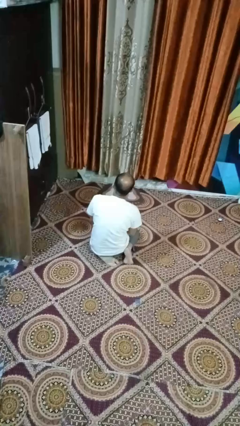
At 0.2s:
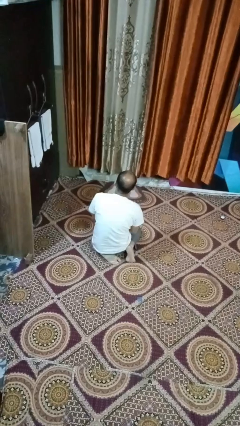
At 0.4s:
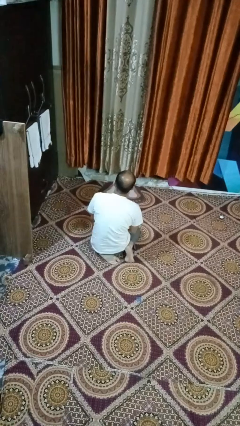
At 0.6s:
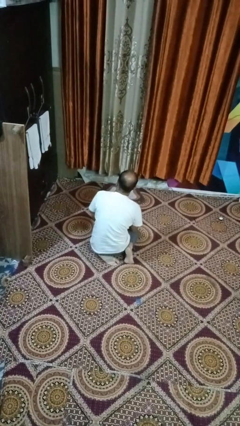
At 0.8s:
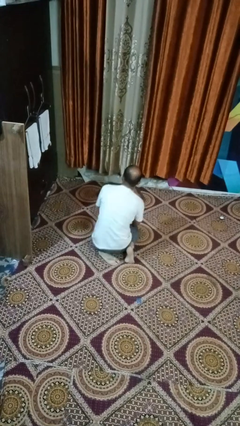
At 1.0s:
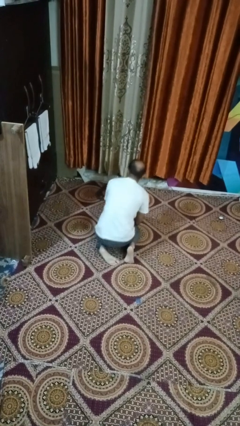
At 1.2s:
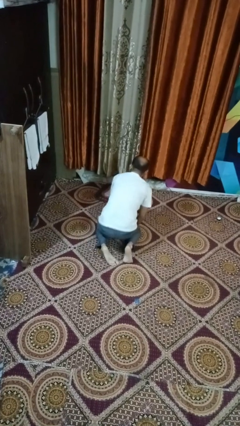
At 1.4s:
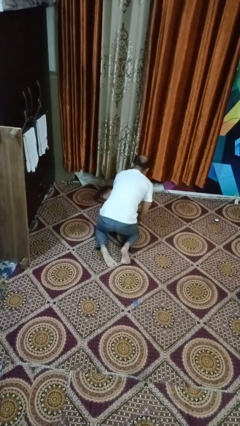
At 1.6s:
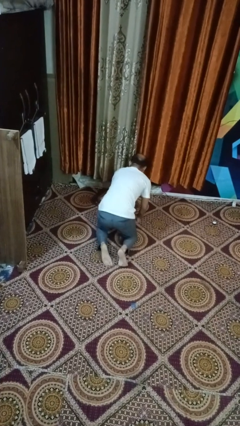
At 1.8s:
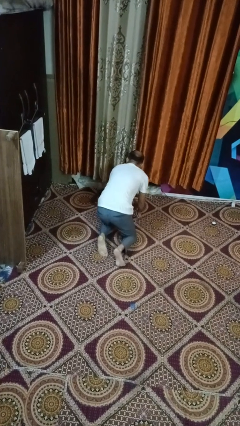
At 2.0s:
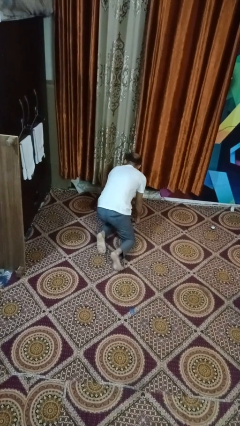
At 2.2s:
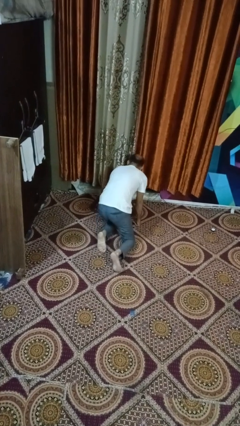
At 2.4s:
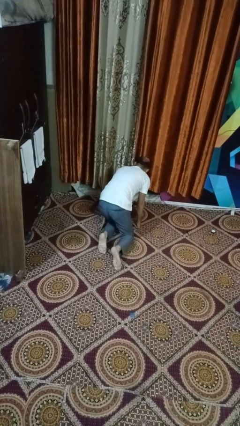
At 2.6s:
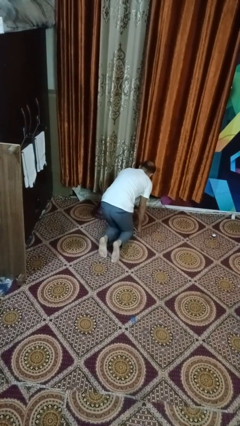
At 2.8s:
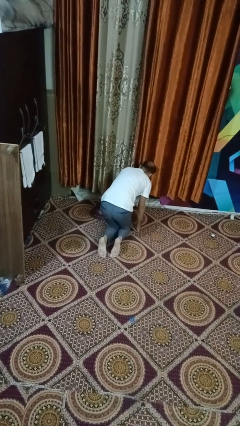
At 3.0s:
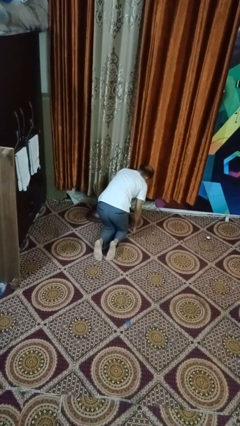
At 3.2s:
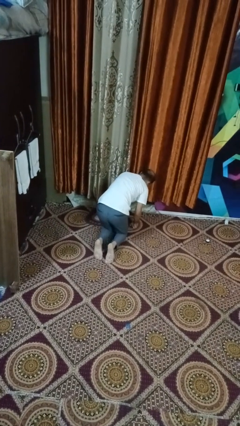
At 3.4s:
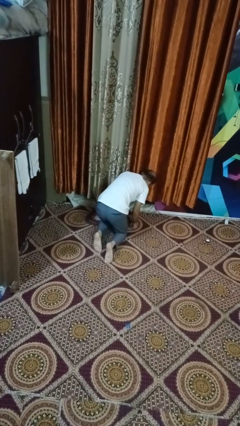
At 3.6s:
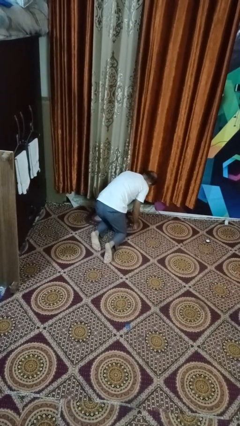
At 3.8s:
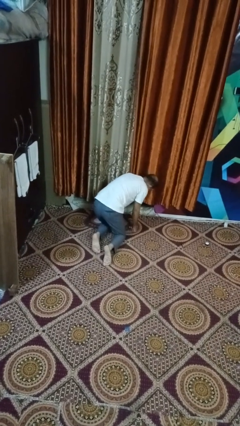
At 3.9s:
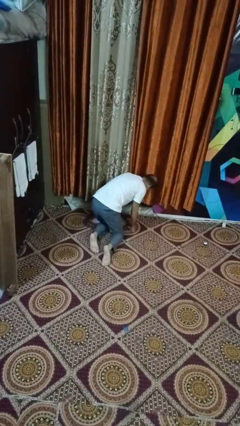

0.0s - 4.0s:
person crawls

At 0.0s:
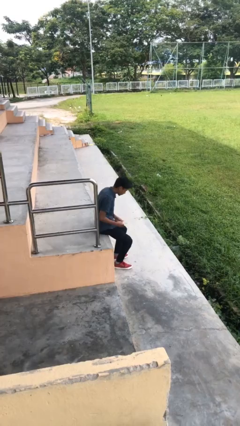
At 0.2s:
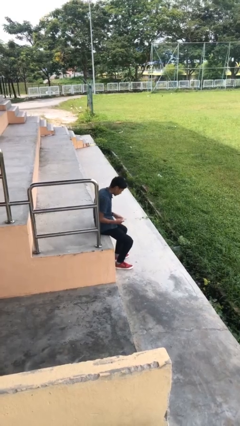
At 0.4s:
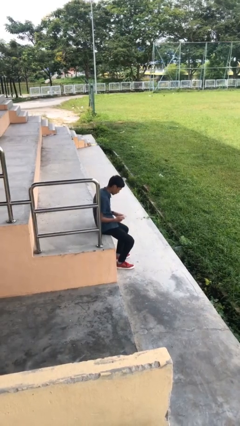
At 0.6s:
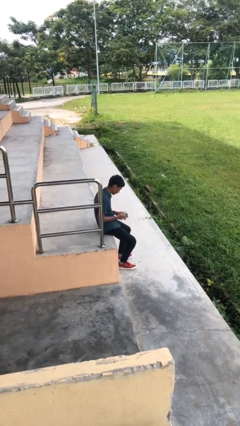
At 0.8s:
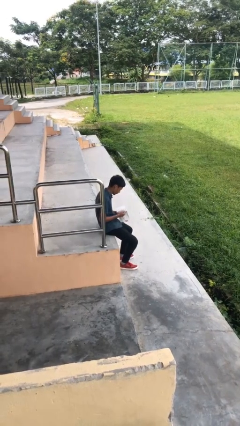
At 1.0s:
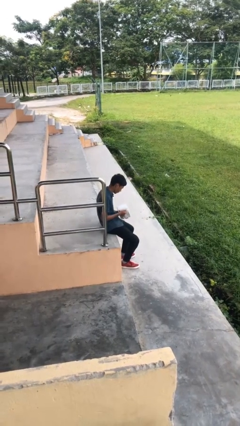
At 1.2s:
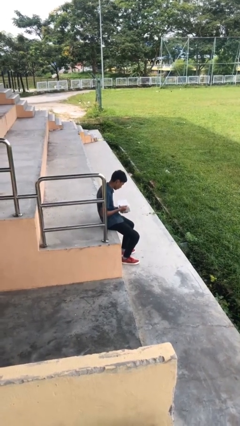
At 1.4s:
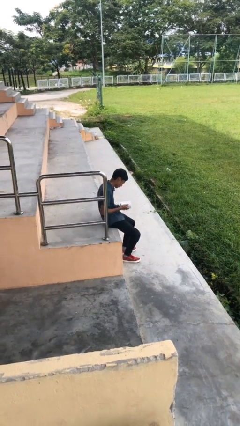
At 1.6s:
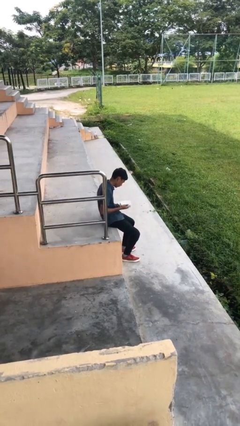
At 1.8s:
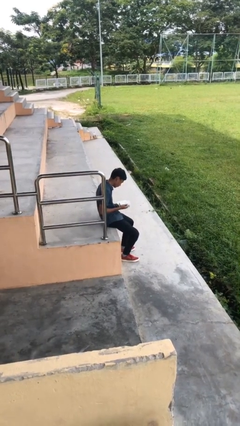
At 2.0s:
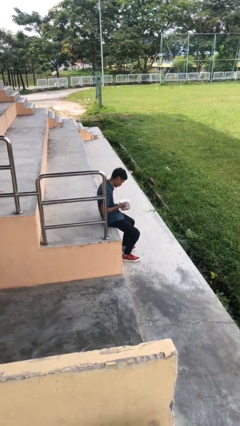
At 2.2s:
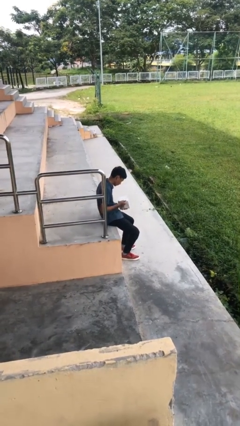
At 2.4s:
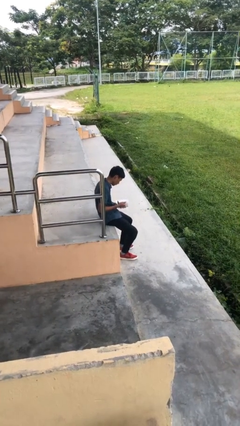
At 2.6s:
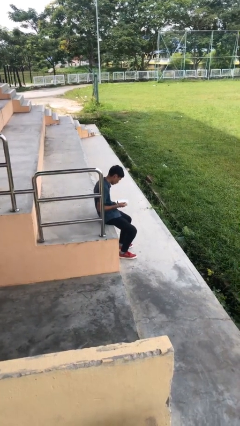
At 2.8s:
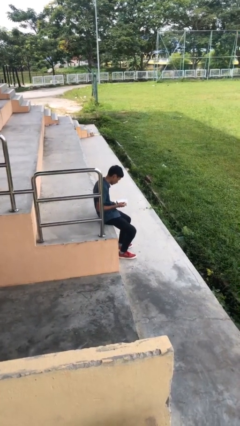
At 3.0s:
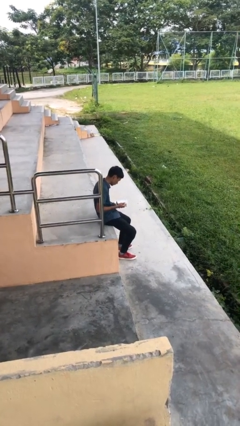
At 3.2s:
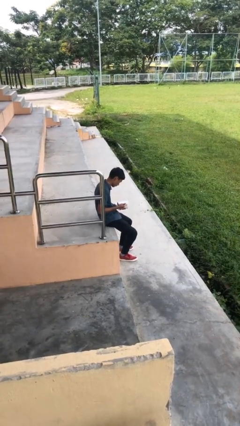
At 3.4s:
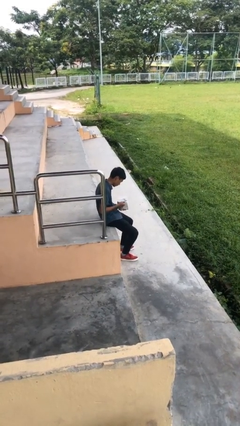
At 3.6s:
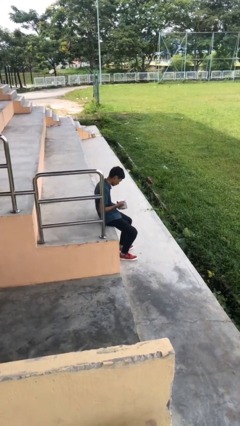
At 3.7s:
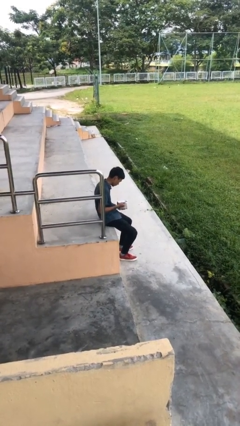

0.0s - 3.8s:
person reads document

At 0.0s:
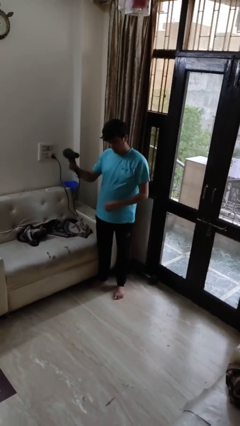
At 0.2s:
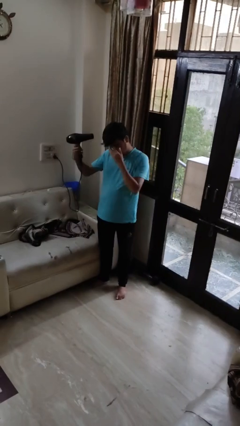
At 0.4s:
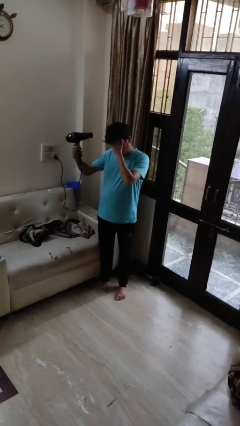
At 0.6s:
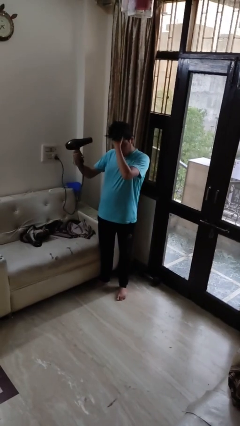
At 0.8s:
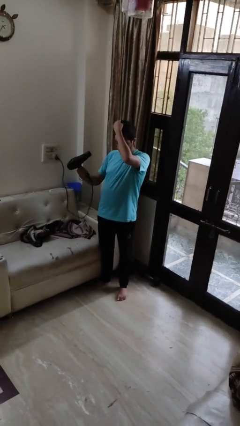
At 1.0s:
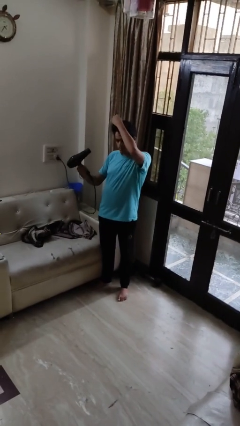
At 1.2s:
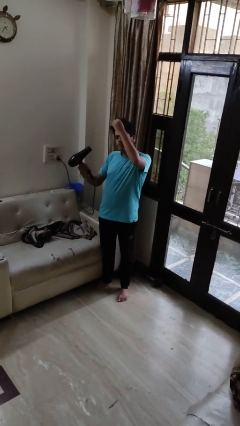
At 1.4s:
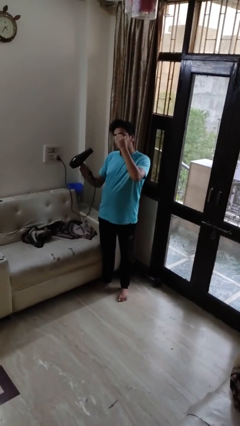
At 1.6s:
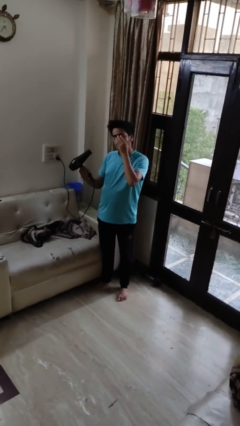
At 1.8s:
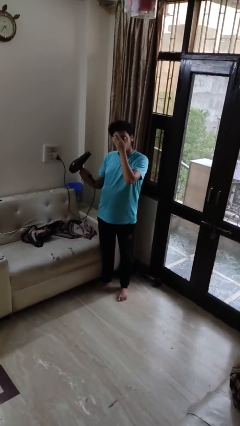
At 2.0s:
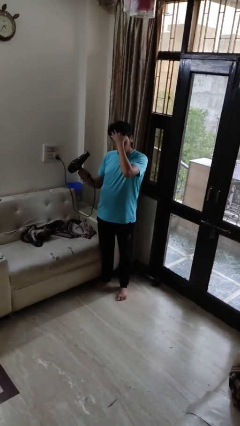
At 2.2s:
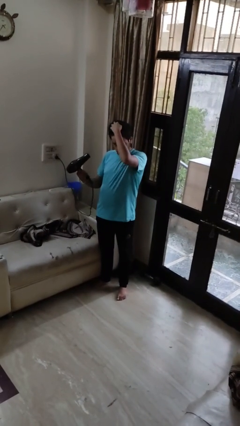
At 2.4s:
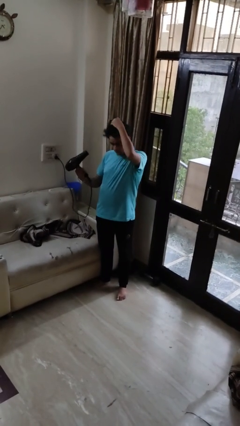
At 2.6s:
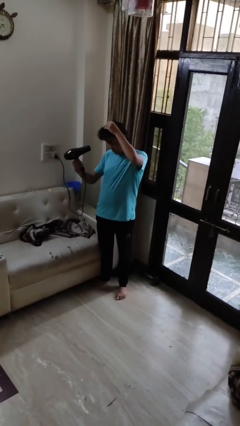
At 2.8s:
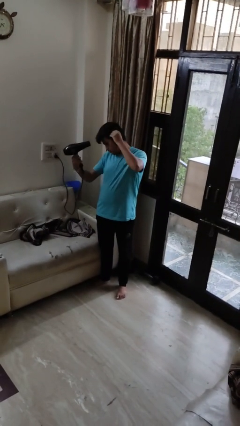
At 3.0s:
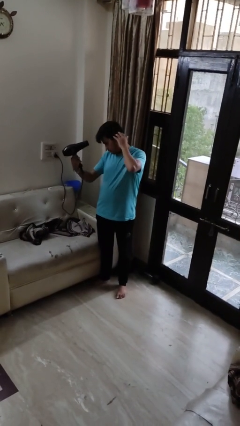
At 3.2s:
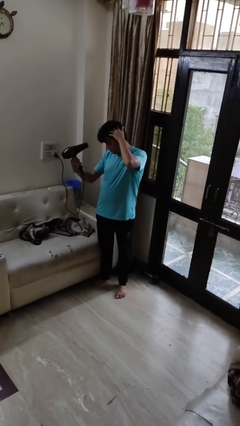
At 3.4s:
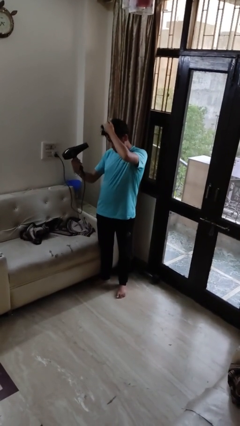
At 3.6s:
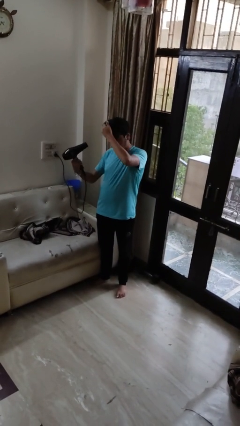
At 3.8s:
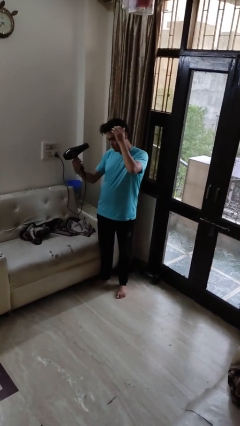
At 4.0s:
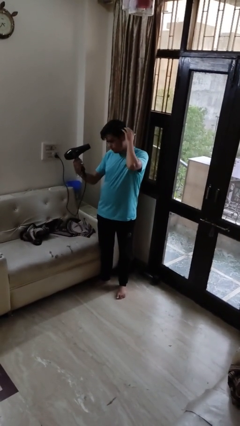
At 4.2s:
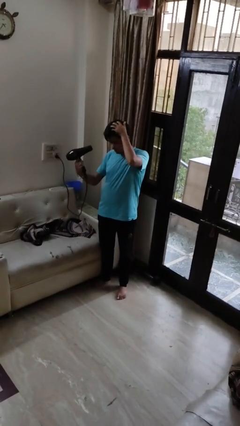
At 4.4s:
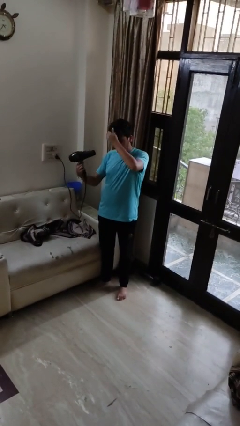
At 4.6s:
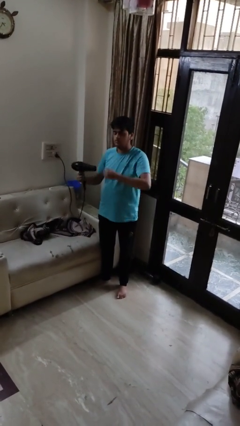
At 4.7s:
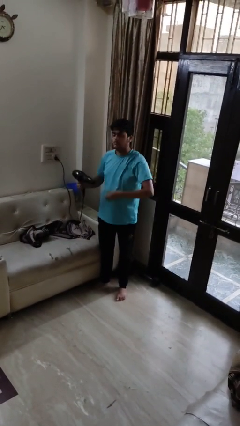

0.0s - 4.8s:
person dries hair with hairdryer

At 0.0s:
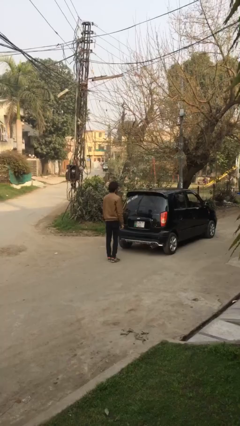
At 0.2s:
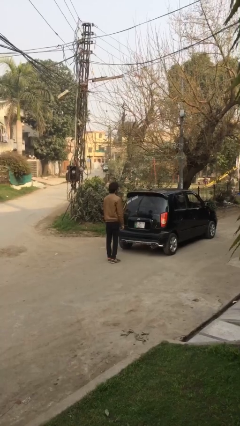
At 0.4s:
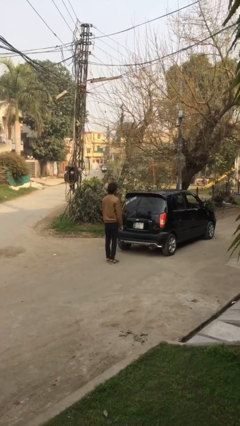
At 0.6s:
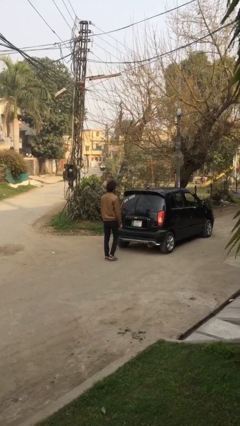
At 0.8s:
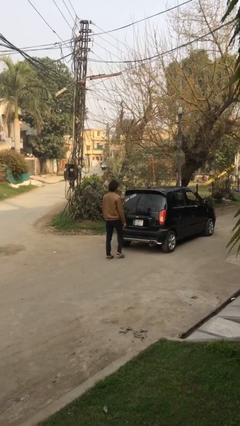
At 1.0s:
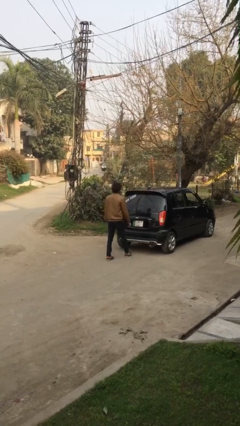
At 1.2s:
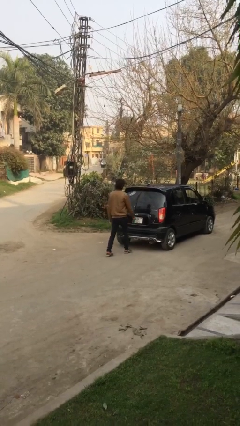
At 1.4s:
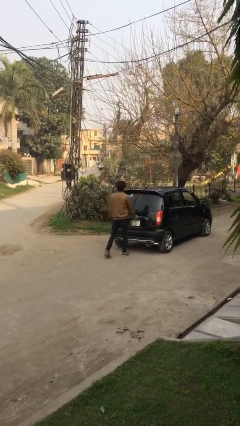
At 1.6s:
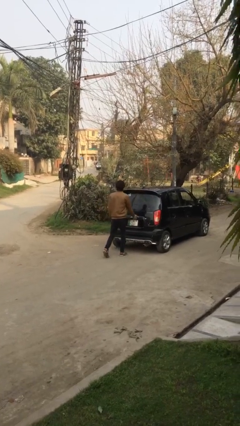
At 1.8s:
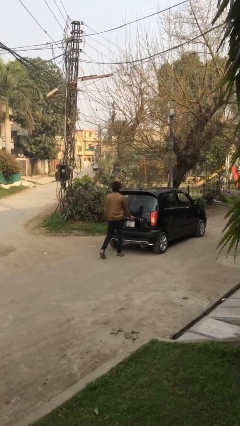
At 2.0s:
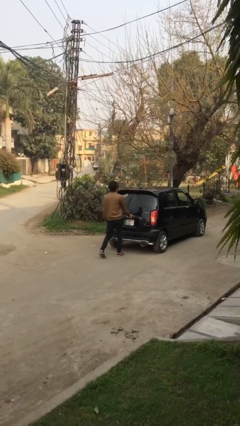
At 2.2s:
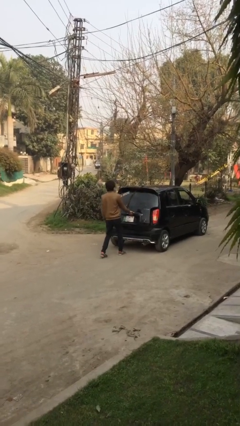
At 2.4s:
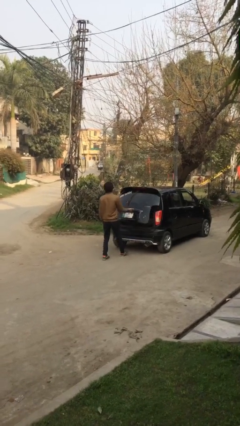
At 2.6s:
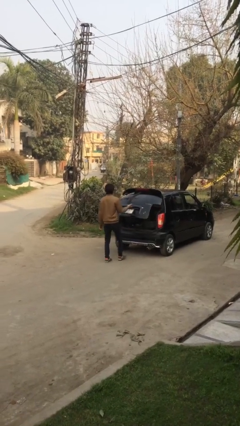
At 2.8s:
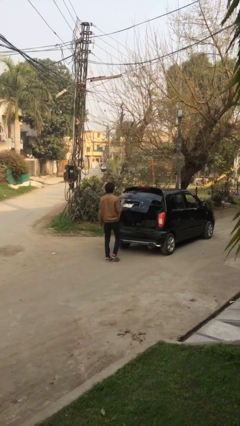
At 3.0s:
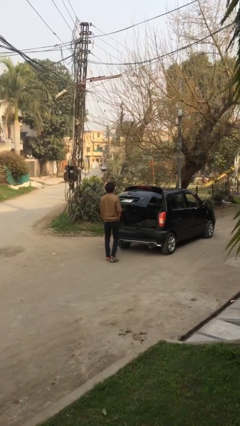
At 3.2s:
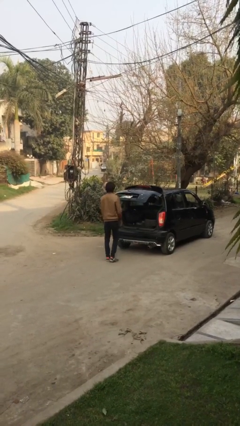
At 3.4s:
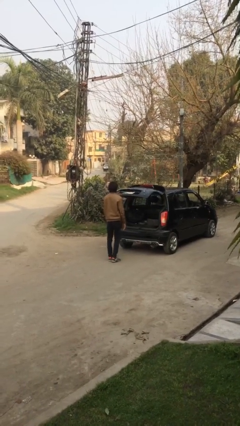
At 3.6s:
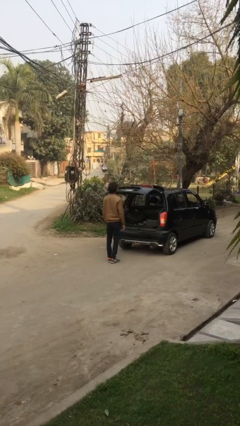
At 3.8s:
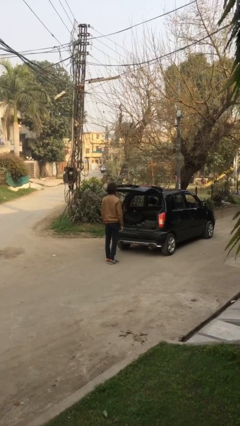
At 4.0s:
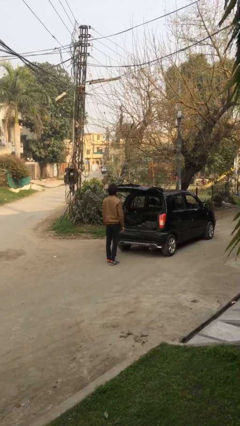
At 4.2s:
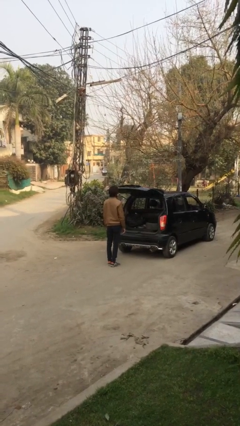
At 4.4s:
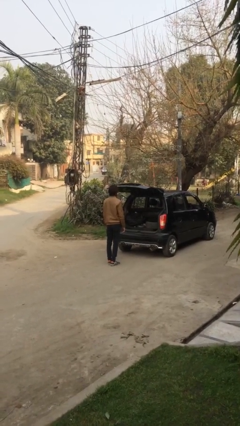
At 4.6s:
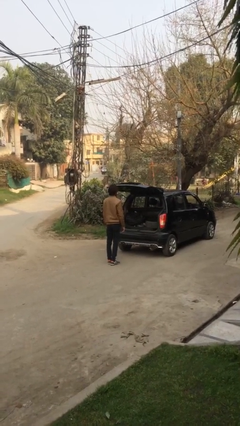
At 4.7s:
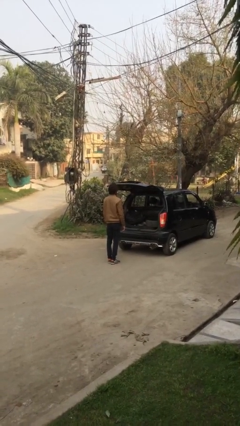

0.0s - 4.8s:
person opens car trunk

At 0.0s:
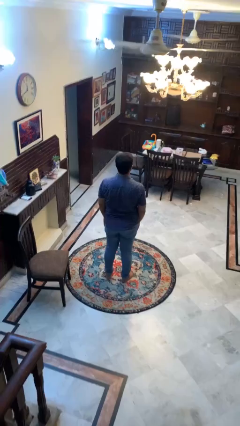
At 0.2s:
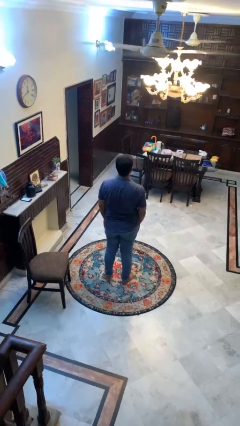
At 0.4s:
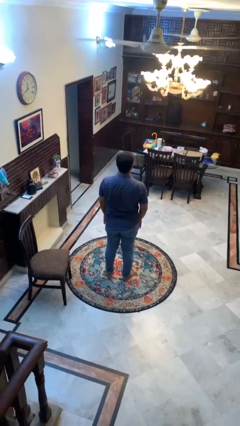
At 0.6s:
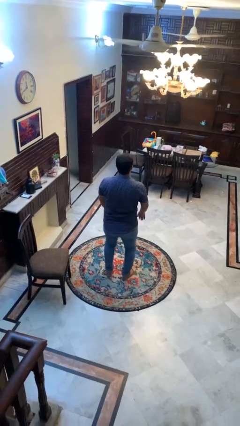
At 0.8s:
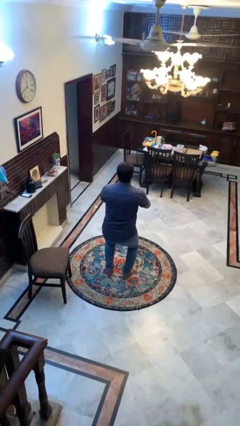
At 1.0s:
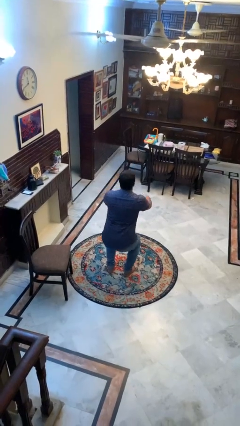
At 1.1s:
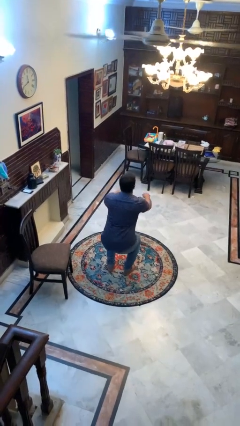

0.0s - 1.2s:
person squats
